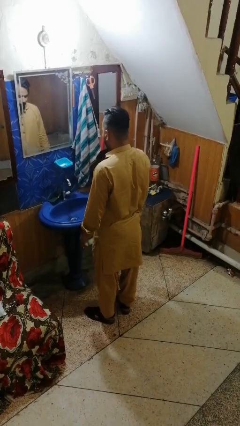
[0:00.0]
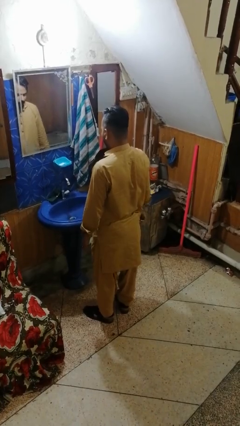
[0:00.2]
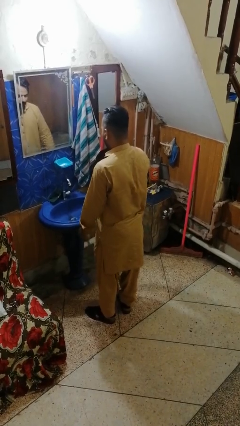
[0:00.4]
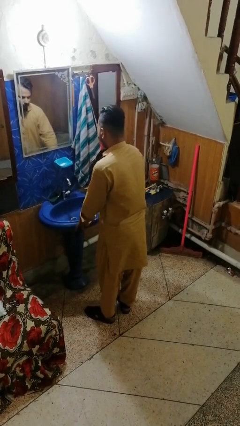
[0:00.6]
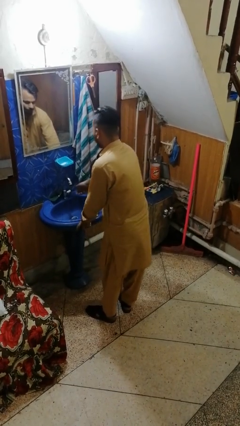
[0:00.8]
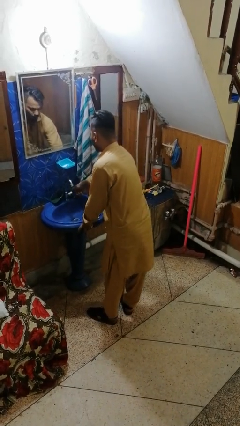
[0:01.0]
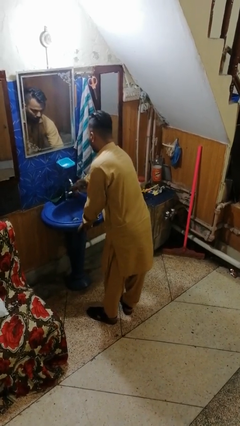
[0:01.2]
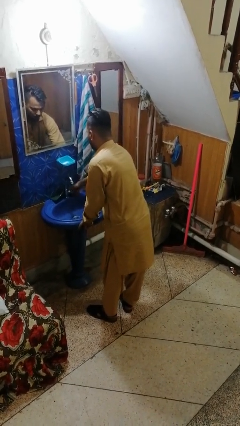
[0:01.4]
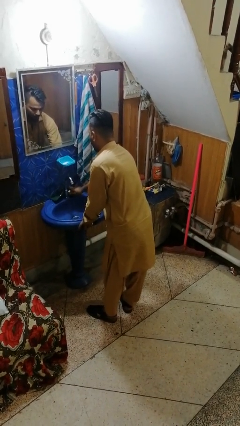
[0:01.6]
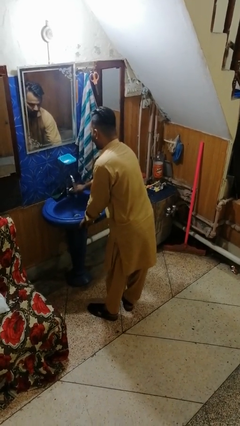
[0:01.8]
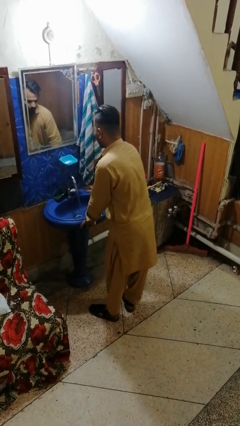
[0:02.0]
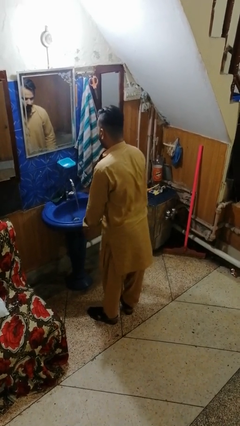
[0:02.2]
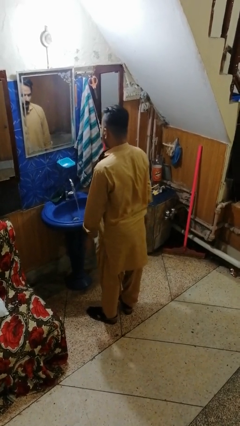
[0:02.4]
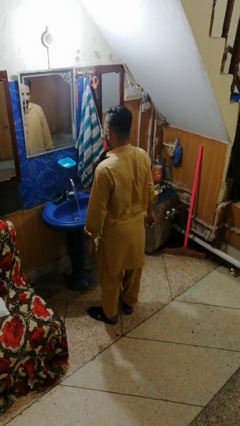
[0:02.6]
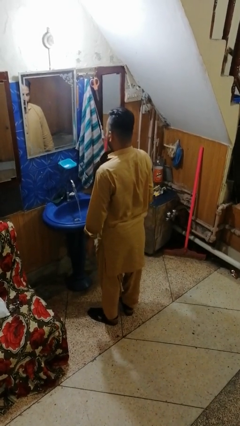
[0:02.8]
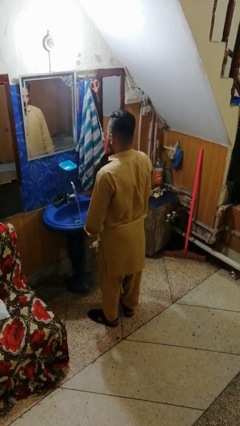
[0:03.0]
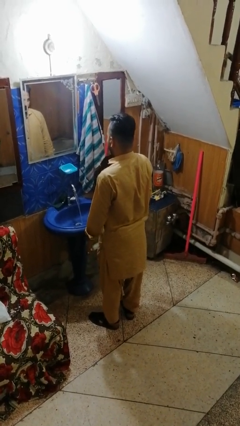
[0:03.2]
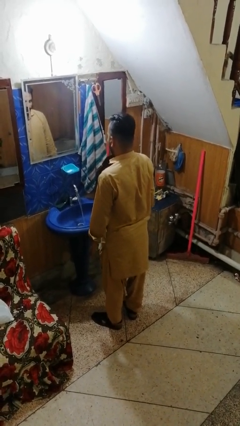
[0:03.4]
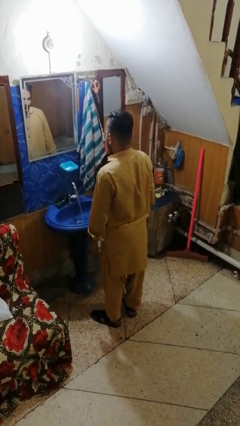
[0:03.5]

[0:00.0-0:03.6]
person turns on faucet

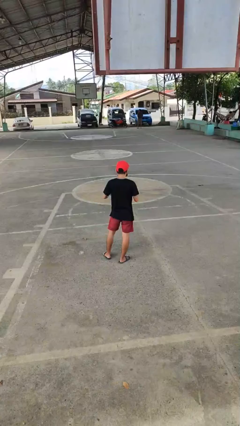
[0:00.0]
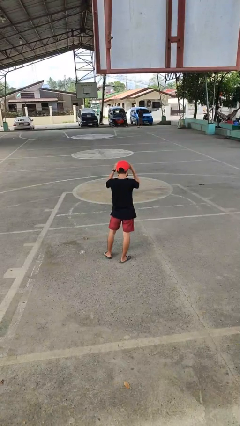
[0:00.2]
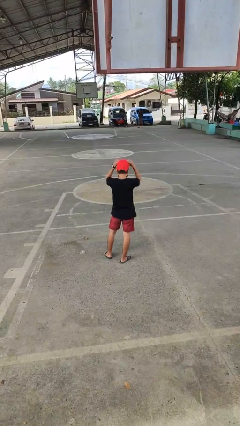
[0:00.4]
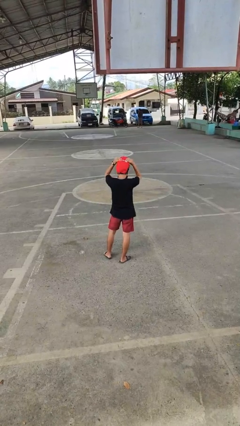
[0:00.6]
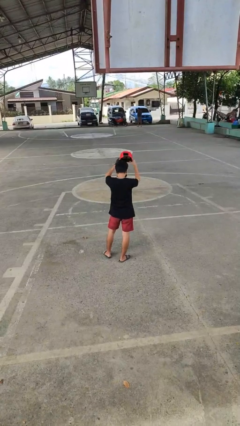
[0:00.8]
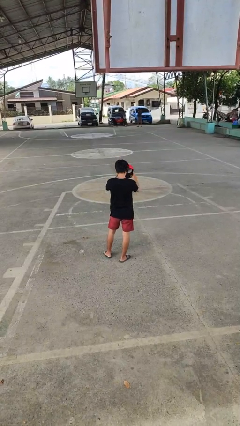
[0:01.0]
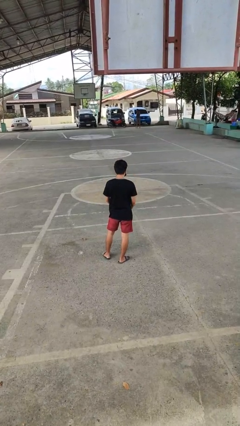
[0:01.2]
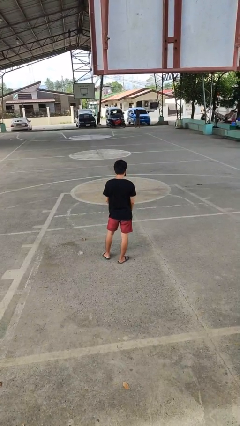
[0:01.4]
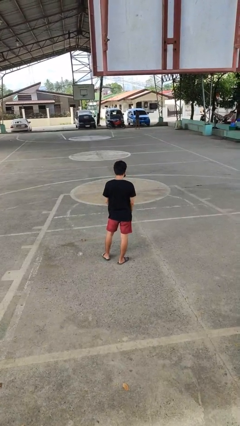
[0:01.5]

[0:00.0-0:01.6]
person takes off hat

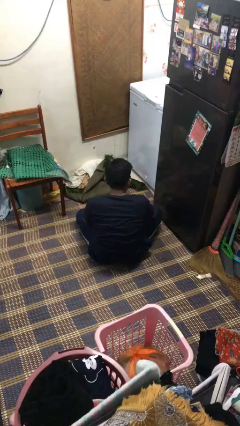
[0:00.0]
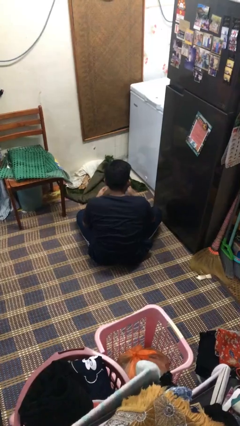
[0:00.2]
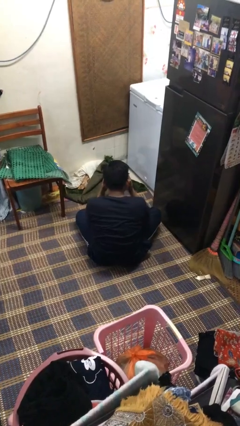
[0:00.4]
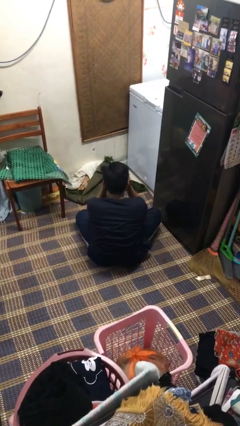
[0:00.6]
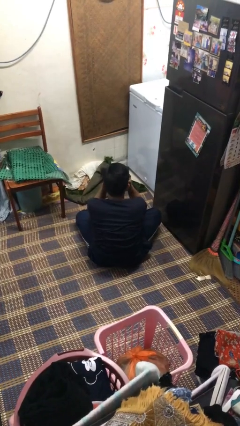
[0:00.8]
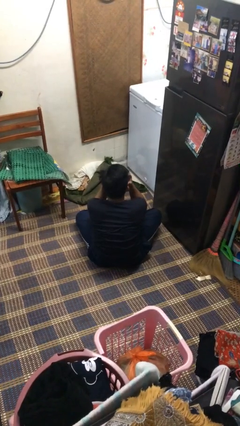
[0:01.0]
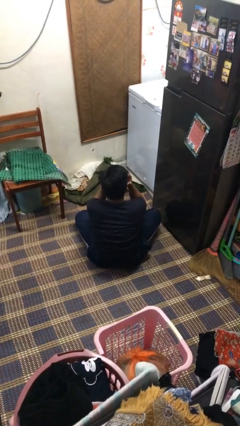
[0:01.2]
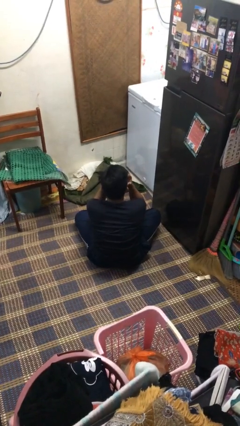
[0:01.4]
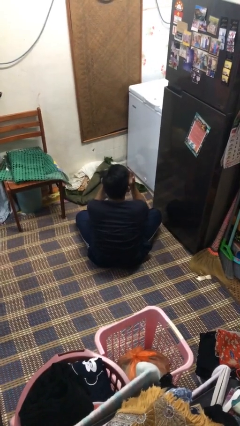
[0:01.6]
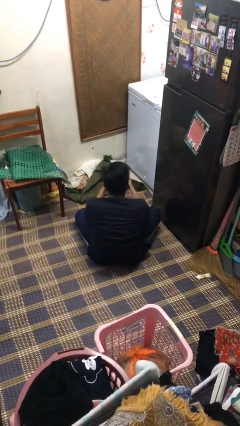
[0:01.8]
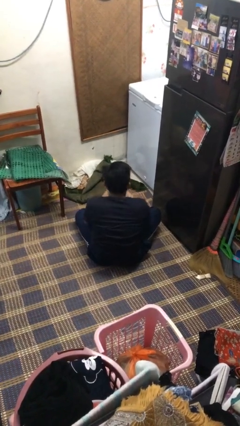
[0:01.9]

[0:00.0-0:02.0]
person covers face with hands

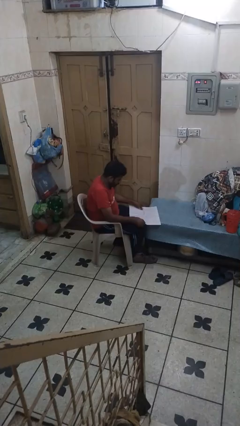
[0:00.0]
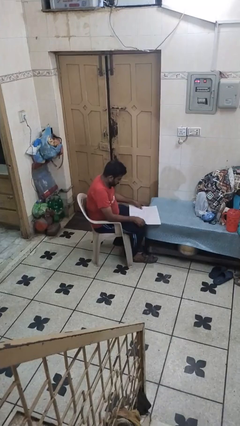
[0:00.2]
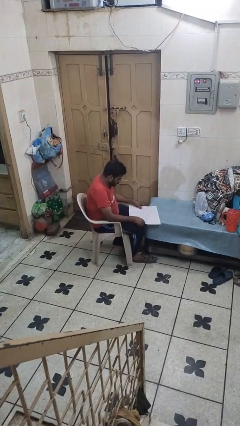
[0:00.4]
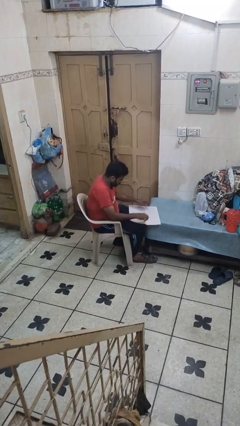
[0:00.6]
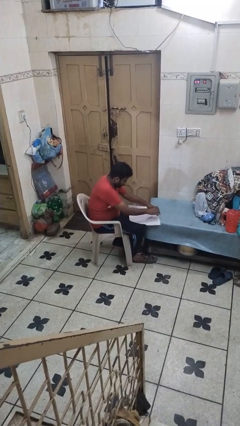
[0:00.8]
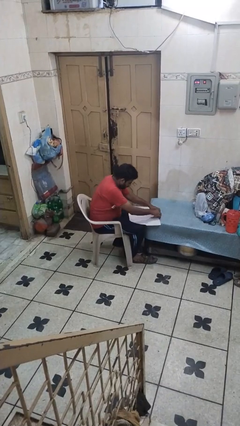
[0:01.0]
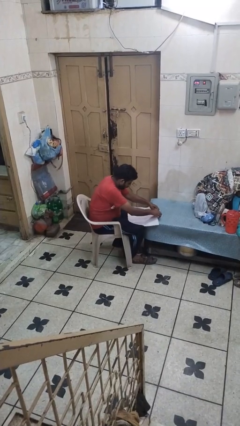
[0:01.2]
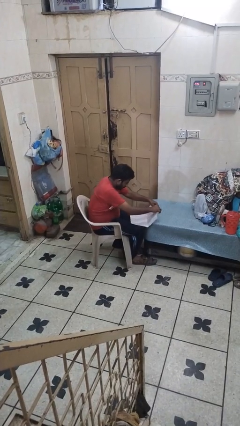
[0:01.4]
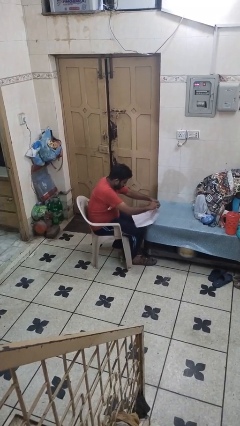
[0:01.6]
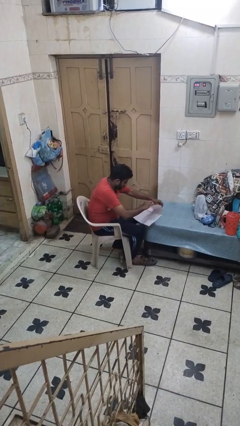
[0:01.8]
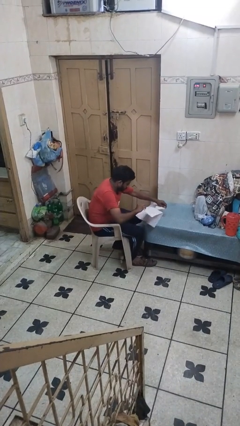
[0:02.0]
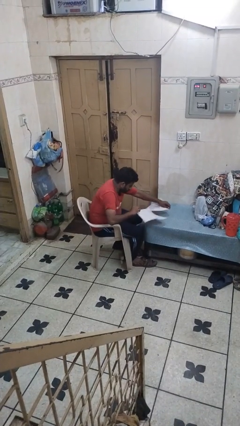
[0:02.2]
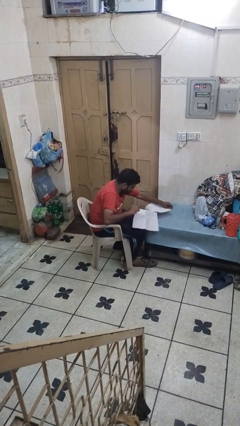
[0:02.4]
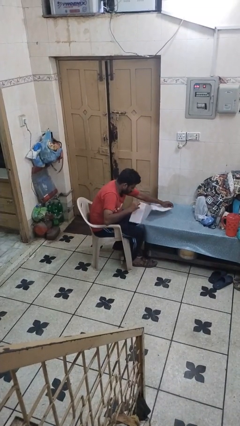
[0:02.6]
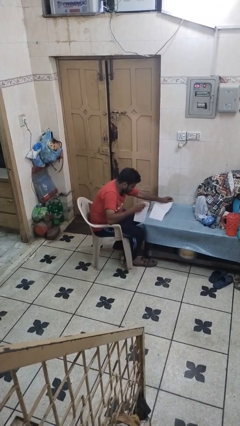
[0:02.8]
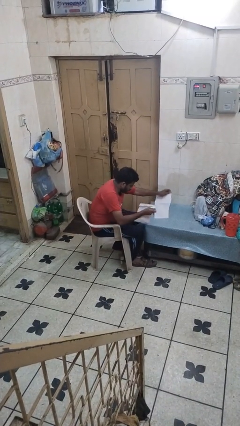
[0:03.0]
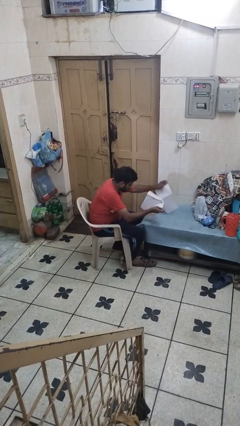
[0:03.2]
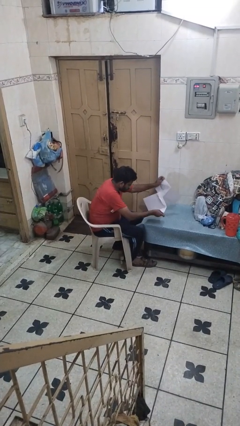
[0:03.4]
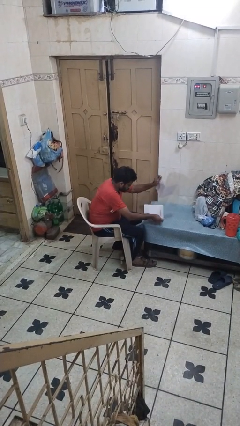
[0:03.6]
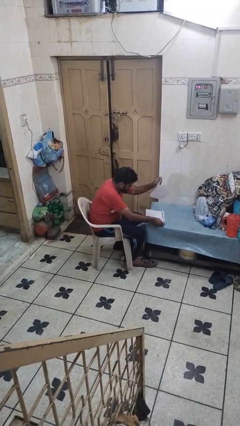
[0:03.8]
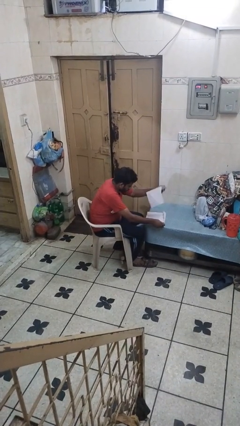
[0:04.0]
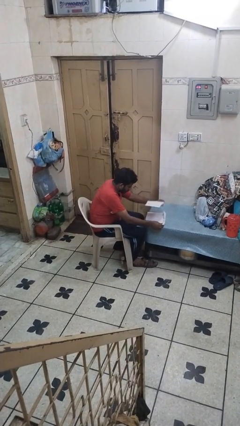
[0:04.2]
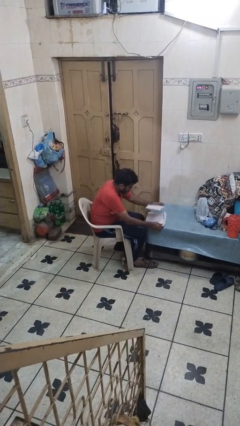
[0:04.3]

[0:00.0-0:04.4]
person tears paper

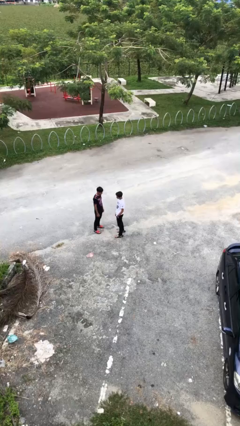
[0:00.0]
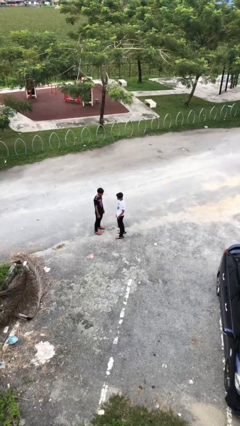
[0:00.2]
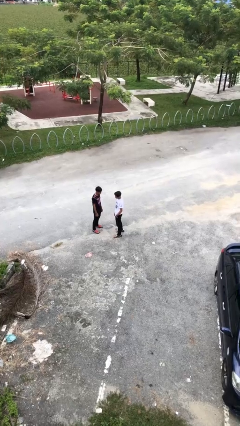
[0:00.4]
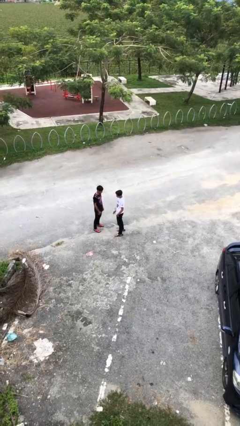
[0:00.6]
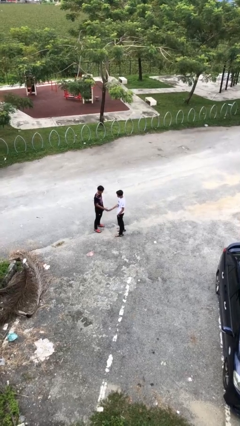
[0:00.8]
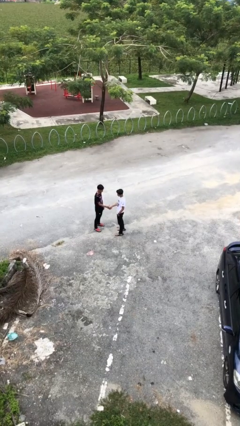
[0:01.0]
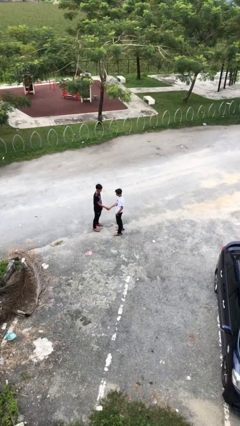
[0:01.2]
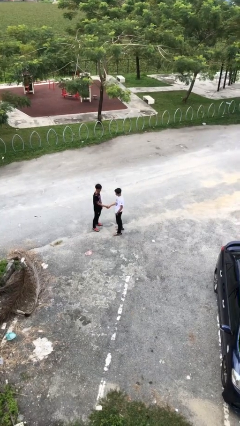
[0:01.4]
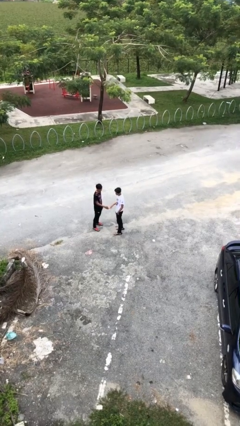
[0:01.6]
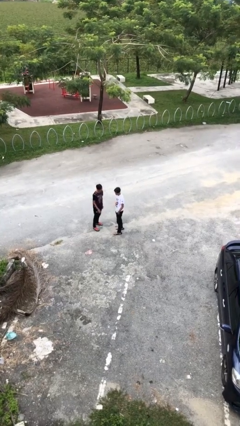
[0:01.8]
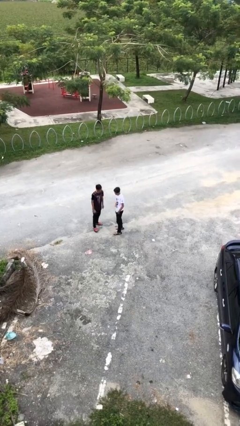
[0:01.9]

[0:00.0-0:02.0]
person shakes hand

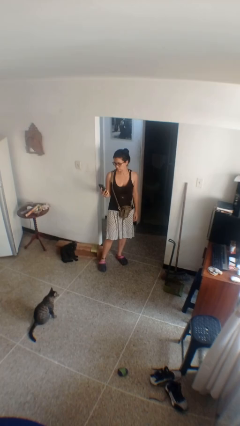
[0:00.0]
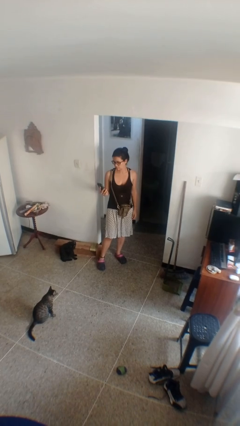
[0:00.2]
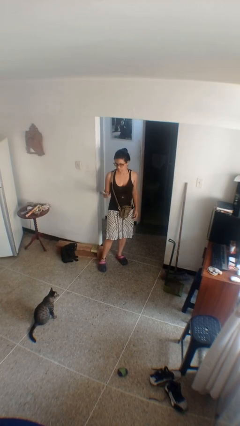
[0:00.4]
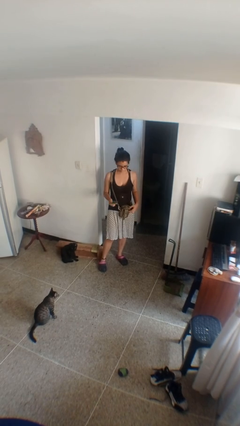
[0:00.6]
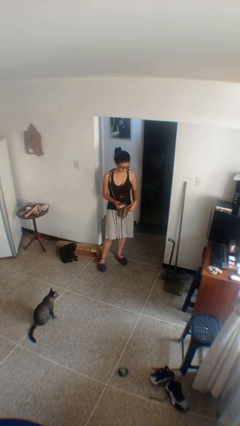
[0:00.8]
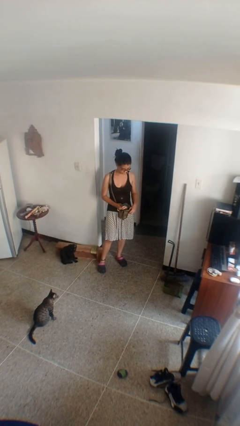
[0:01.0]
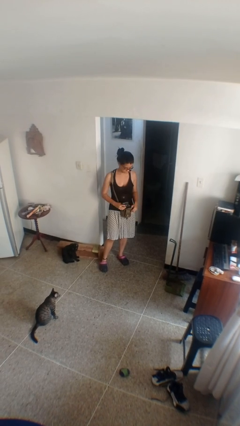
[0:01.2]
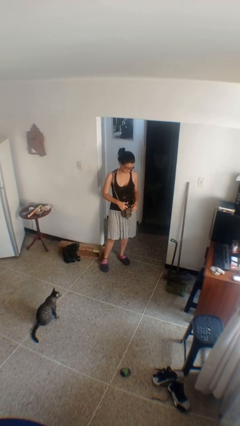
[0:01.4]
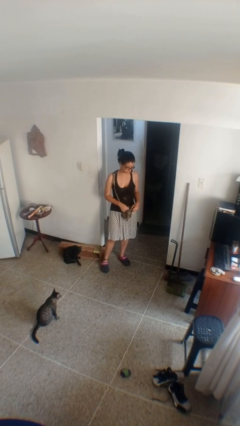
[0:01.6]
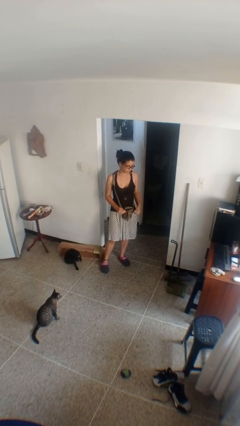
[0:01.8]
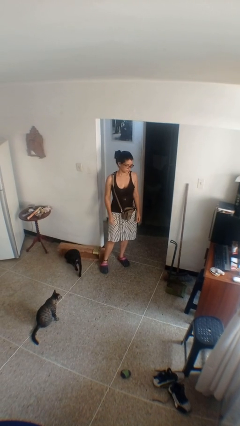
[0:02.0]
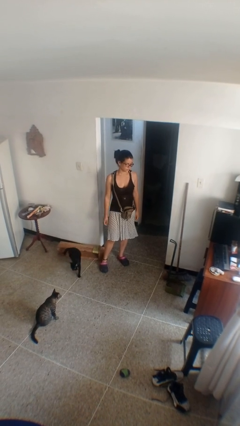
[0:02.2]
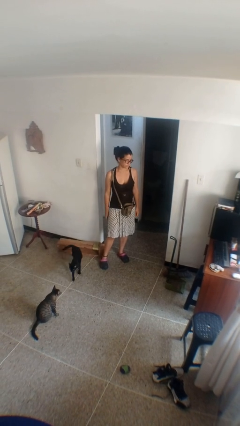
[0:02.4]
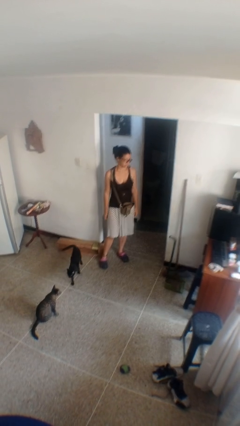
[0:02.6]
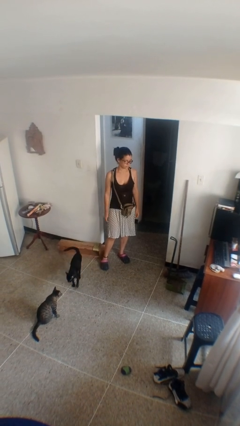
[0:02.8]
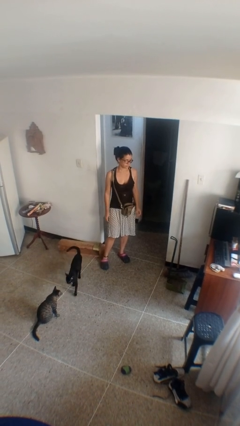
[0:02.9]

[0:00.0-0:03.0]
person puts phone into pocket

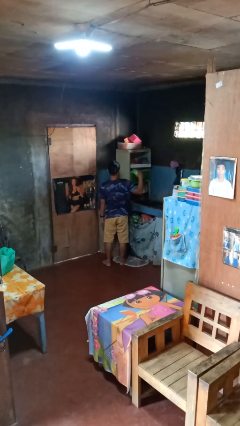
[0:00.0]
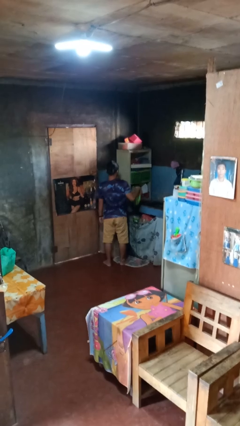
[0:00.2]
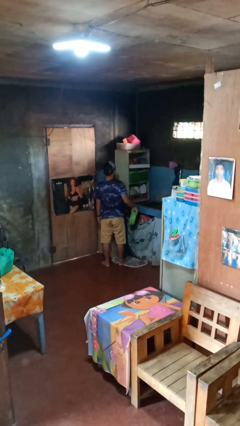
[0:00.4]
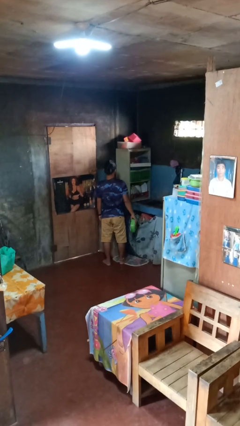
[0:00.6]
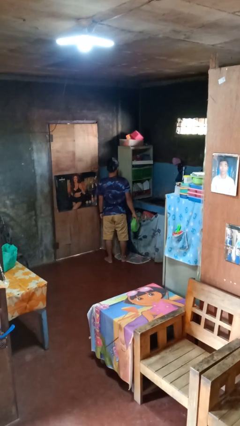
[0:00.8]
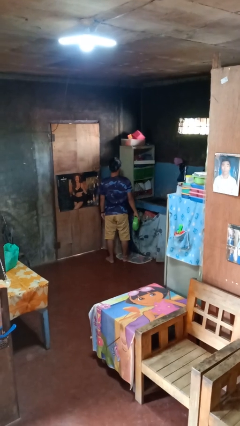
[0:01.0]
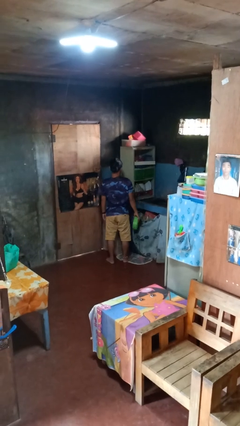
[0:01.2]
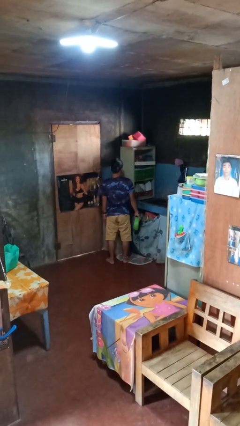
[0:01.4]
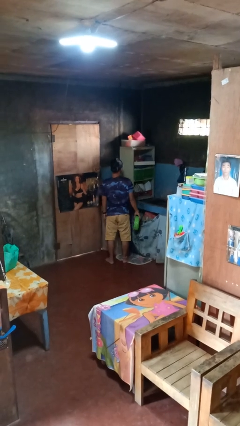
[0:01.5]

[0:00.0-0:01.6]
person takes object from cabinet
